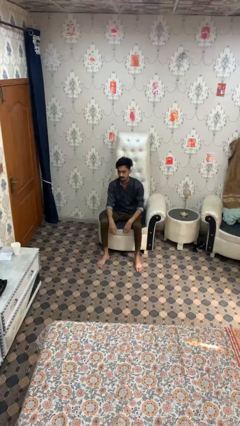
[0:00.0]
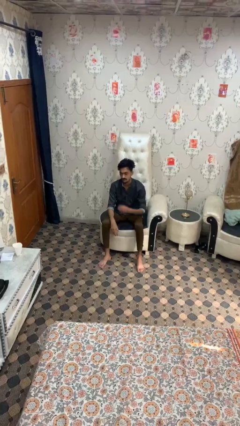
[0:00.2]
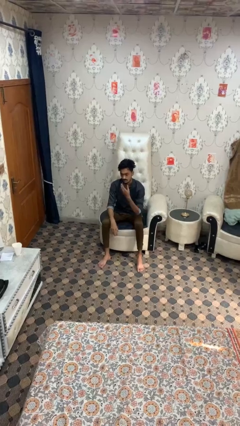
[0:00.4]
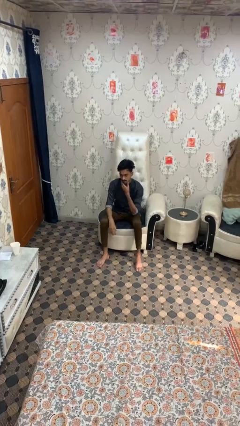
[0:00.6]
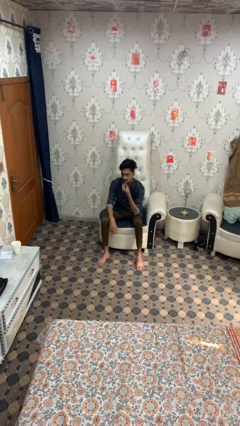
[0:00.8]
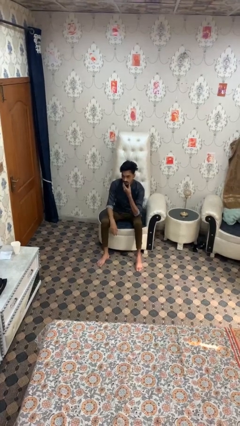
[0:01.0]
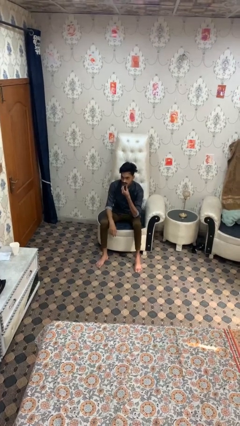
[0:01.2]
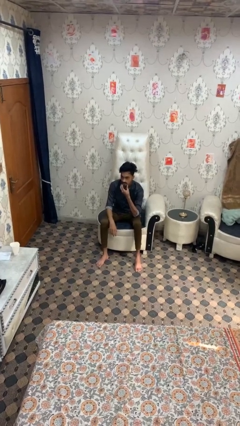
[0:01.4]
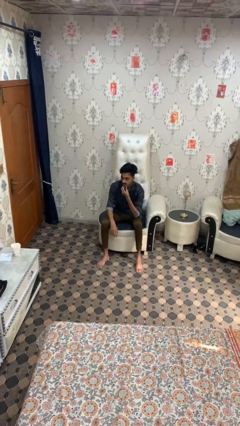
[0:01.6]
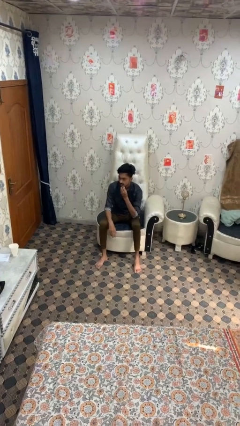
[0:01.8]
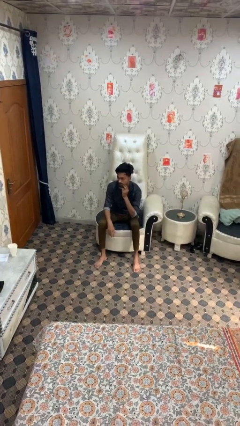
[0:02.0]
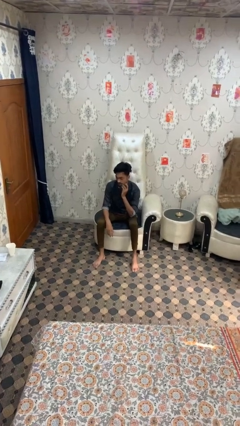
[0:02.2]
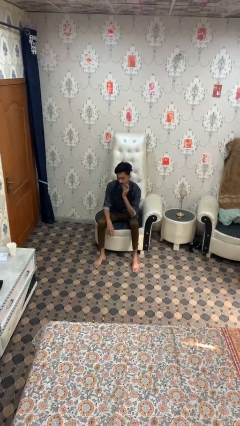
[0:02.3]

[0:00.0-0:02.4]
person strokes chin

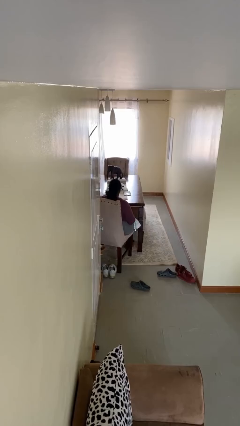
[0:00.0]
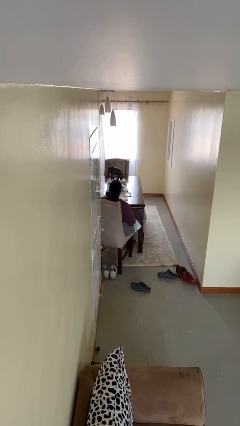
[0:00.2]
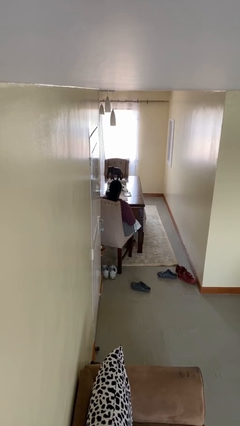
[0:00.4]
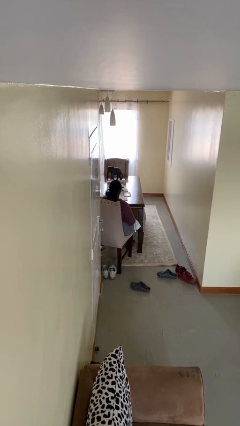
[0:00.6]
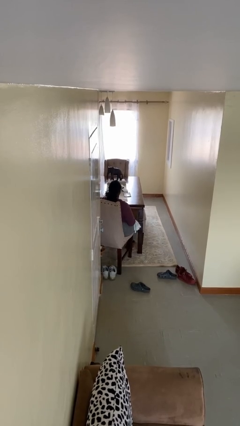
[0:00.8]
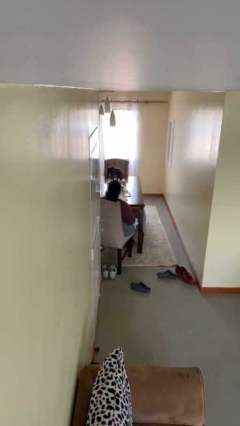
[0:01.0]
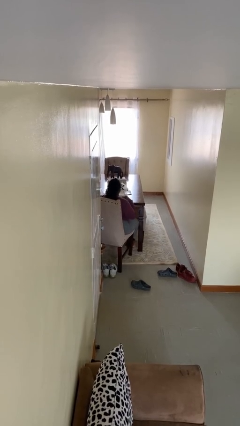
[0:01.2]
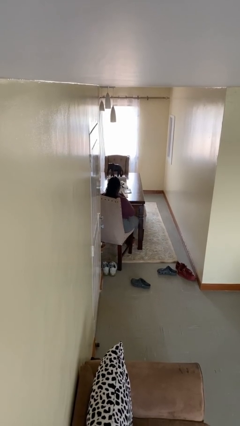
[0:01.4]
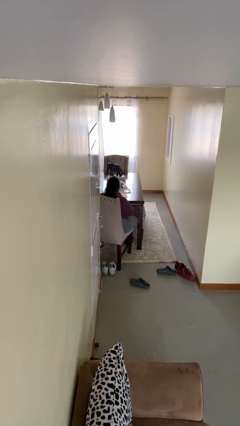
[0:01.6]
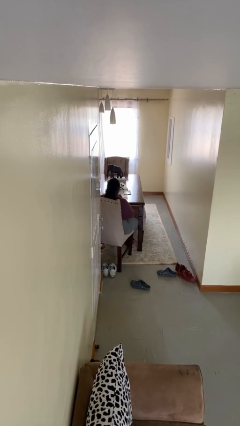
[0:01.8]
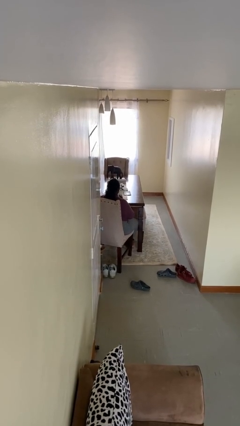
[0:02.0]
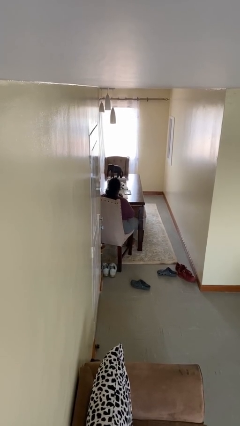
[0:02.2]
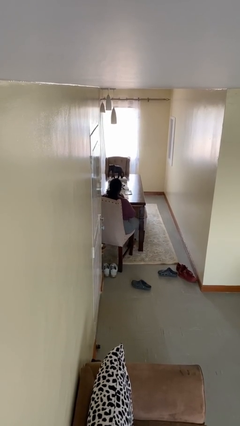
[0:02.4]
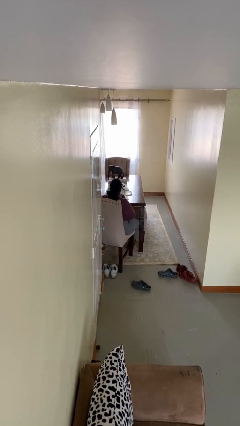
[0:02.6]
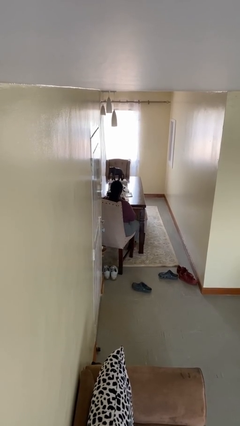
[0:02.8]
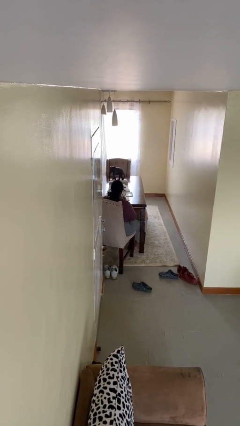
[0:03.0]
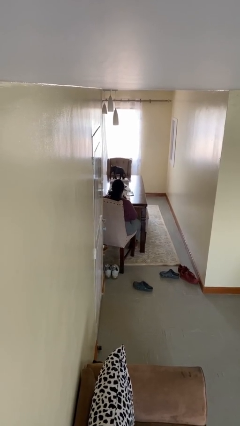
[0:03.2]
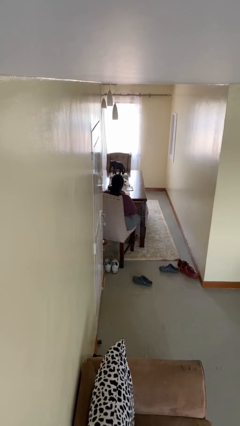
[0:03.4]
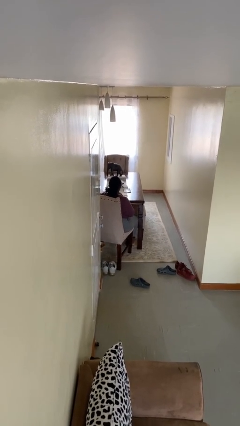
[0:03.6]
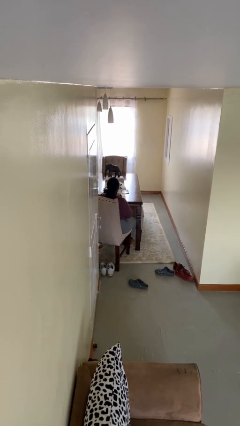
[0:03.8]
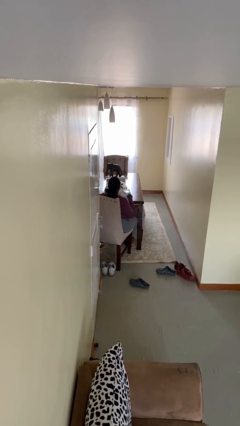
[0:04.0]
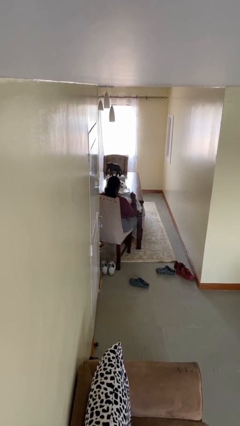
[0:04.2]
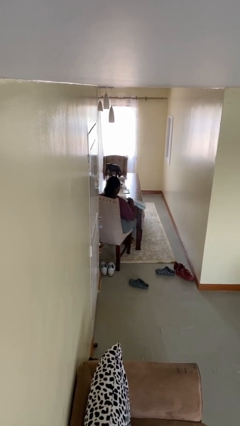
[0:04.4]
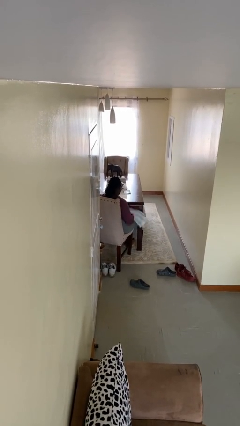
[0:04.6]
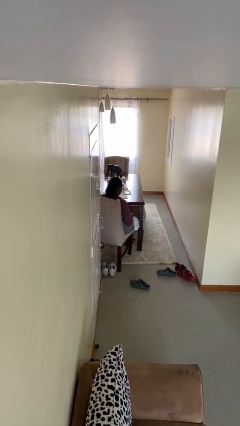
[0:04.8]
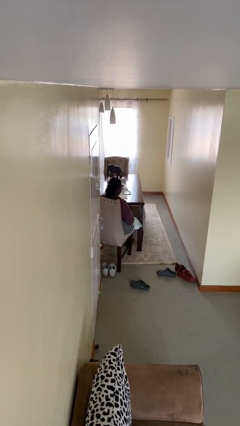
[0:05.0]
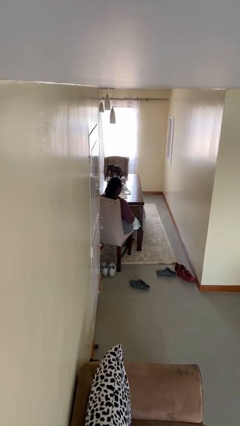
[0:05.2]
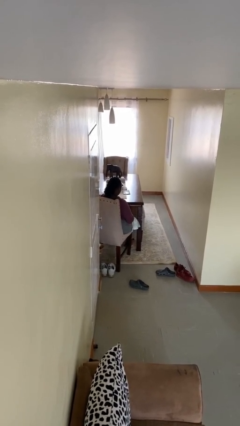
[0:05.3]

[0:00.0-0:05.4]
person wipes mouth with napkin

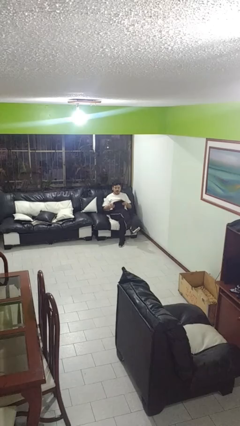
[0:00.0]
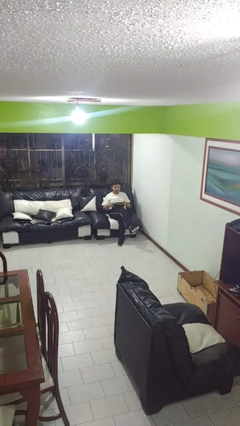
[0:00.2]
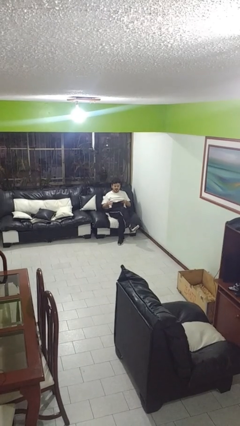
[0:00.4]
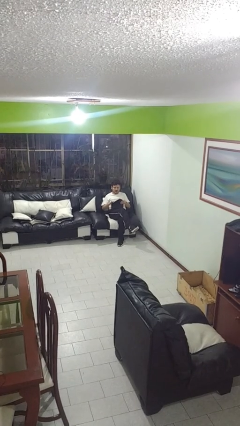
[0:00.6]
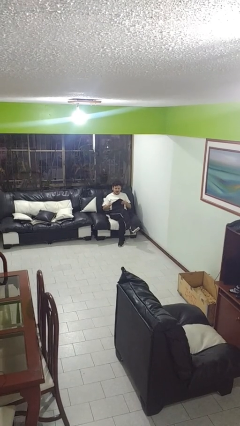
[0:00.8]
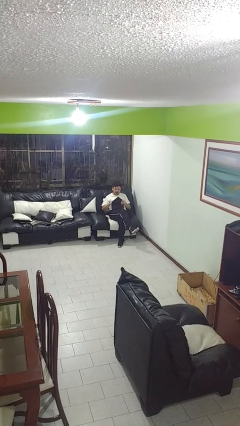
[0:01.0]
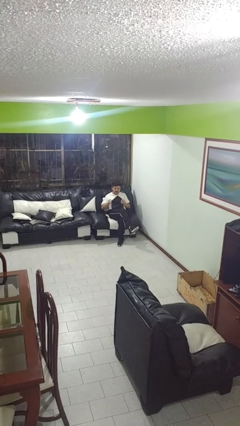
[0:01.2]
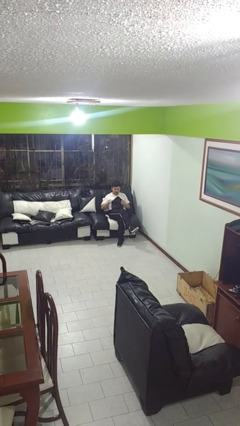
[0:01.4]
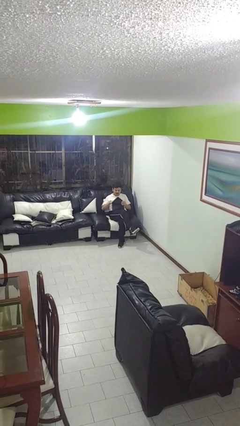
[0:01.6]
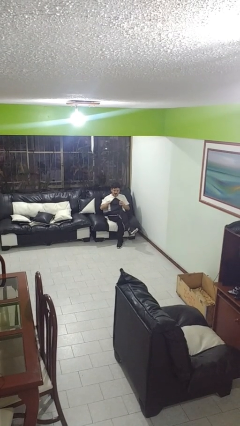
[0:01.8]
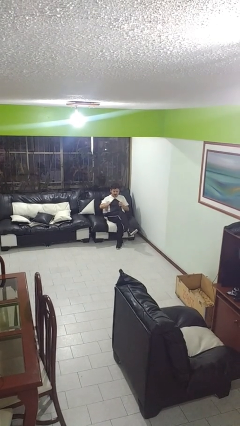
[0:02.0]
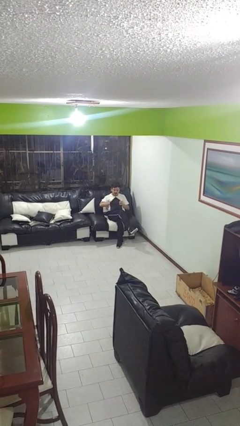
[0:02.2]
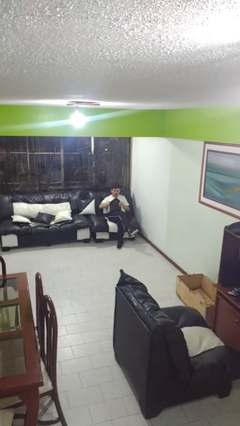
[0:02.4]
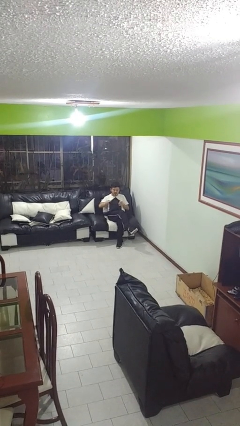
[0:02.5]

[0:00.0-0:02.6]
person searches in purse

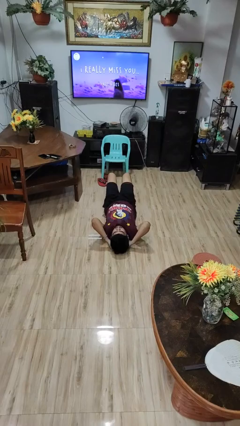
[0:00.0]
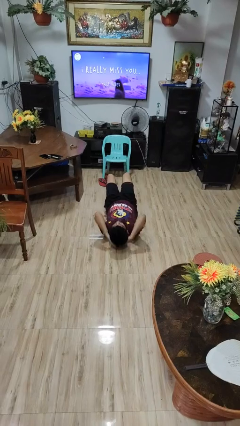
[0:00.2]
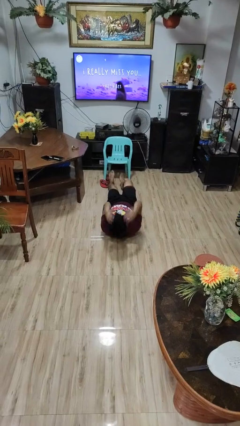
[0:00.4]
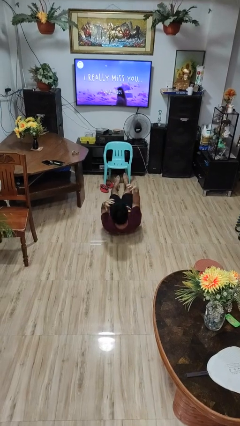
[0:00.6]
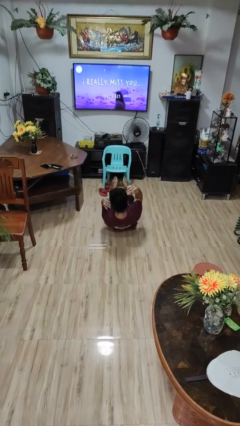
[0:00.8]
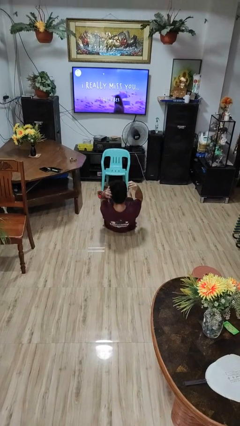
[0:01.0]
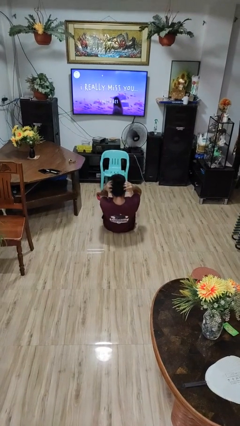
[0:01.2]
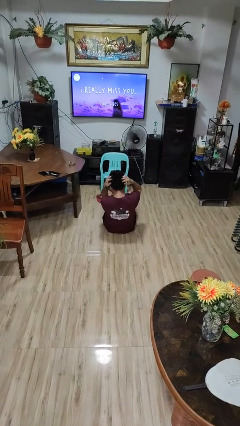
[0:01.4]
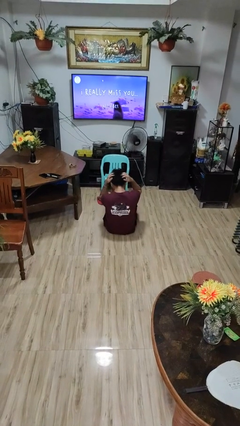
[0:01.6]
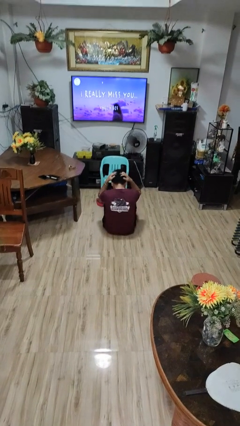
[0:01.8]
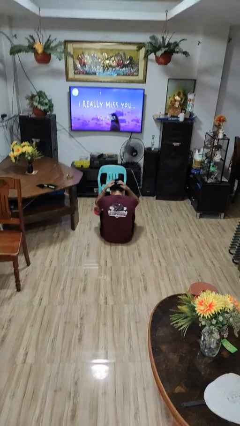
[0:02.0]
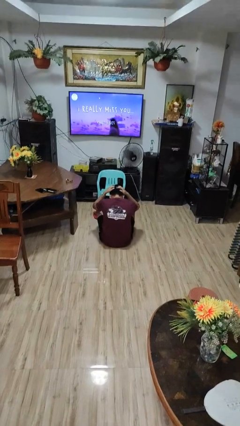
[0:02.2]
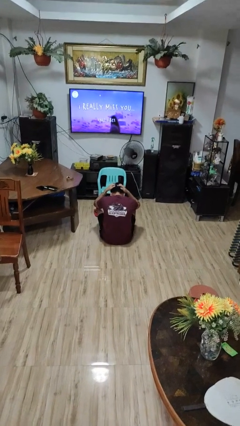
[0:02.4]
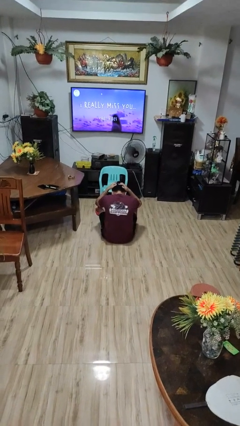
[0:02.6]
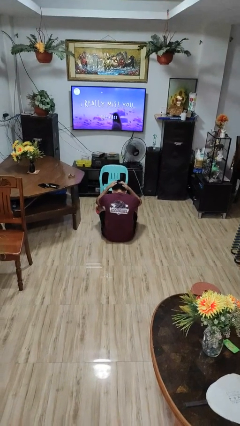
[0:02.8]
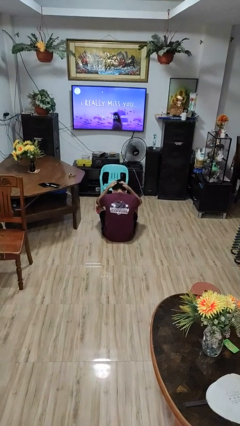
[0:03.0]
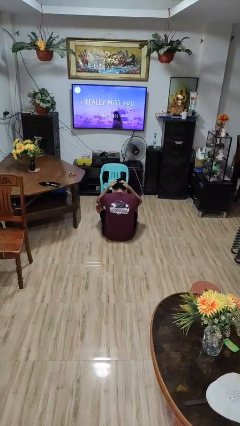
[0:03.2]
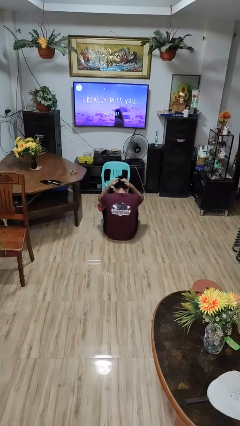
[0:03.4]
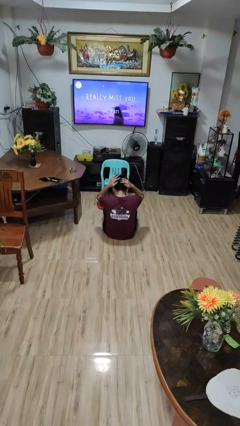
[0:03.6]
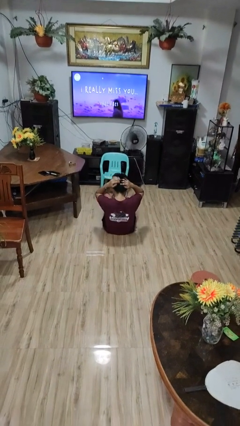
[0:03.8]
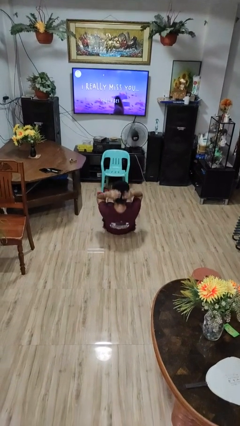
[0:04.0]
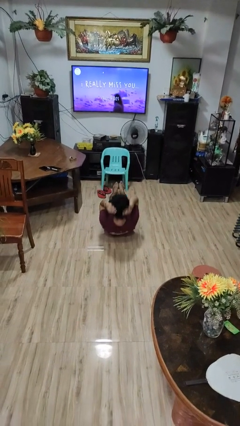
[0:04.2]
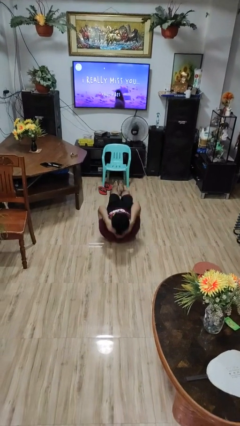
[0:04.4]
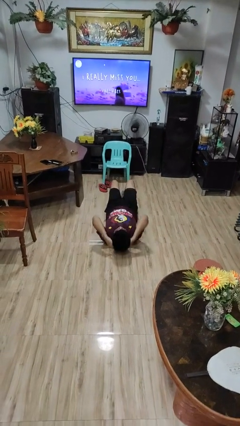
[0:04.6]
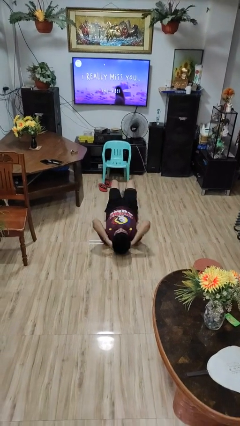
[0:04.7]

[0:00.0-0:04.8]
person exercises with situp

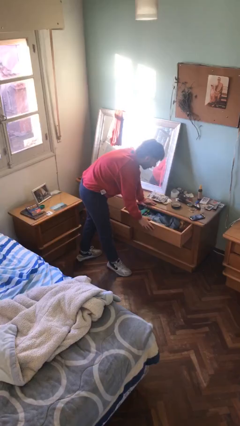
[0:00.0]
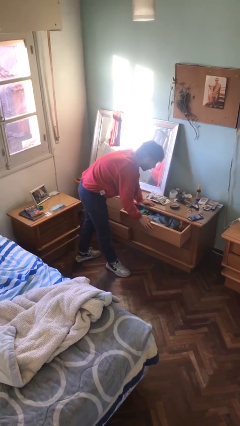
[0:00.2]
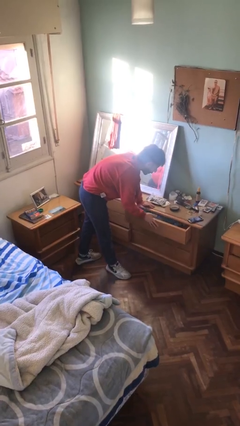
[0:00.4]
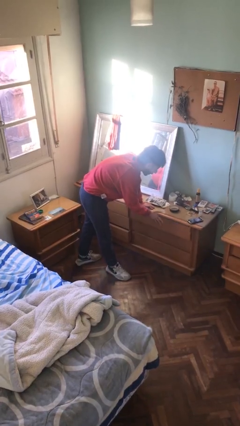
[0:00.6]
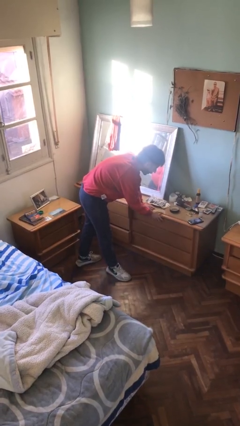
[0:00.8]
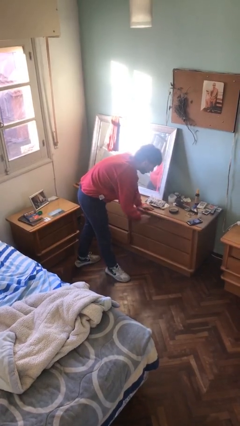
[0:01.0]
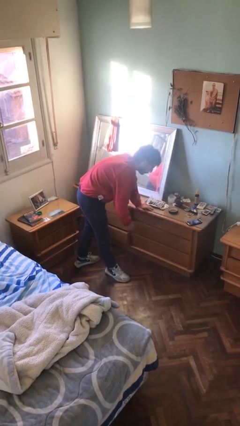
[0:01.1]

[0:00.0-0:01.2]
person closes dresser drawer

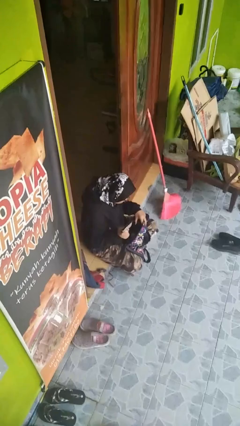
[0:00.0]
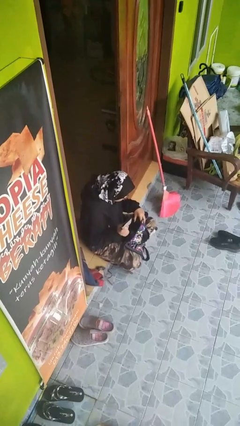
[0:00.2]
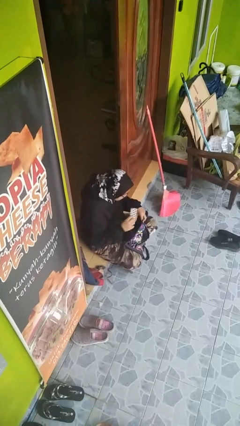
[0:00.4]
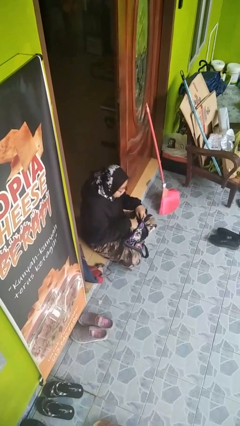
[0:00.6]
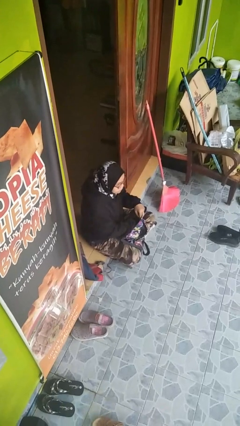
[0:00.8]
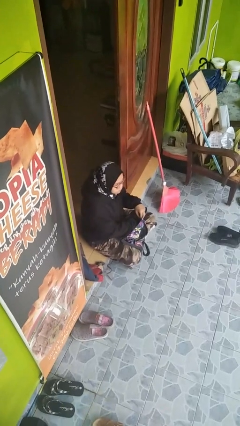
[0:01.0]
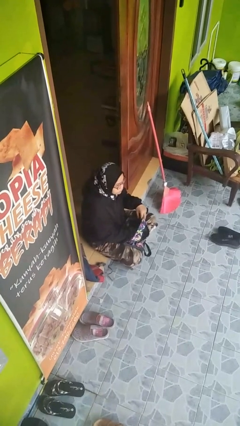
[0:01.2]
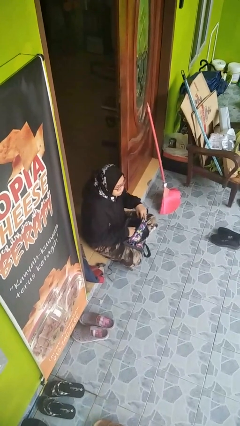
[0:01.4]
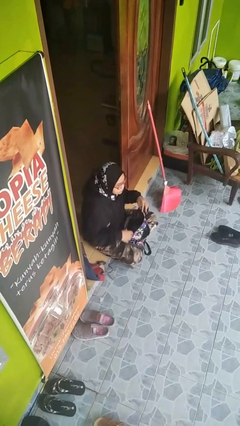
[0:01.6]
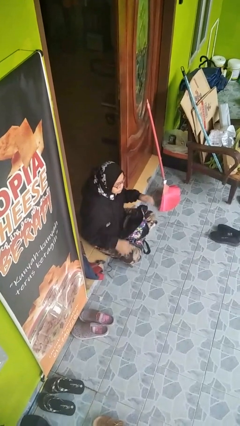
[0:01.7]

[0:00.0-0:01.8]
person puts object into purse
